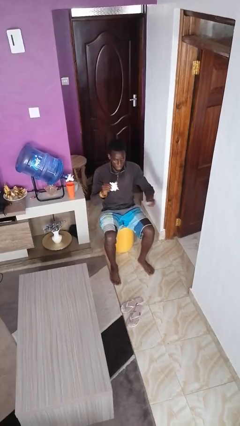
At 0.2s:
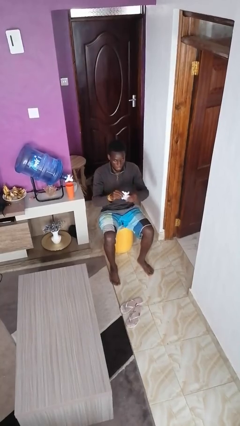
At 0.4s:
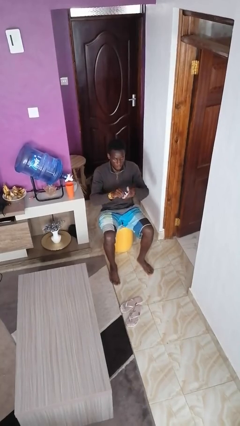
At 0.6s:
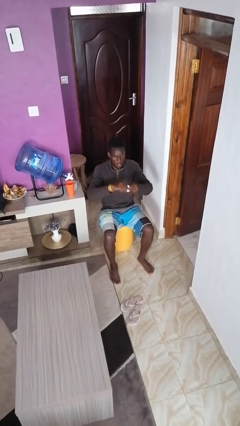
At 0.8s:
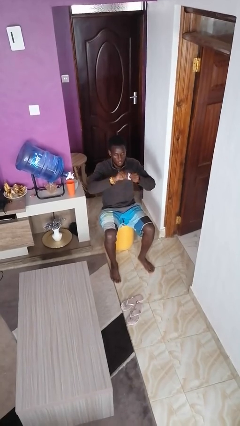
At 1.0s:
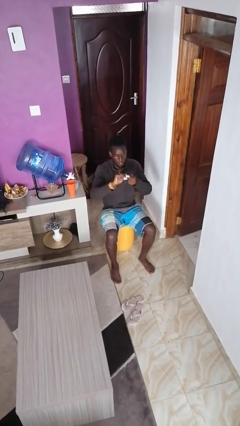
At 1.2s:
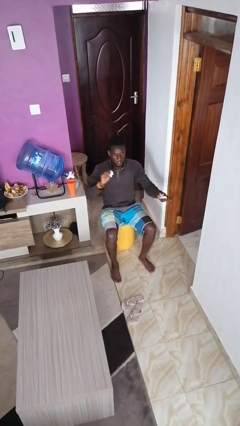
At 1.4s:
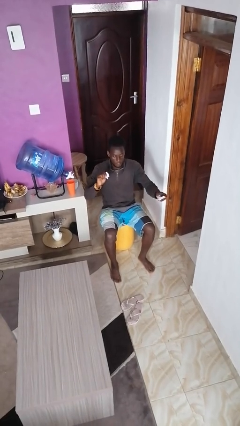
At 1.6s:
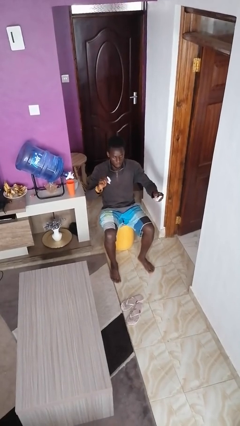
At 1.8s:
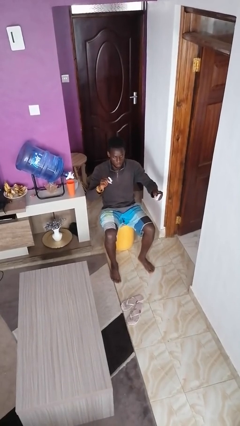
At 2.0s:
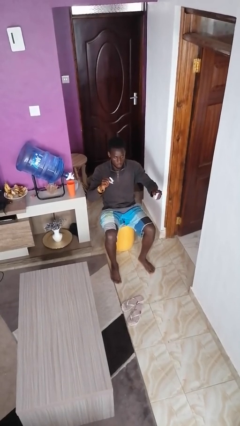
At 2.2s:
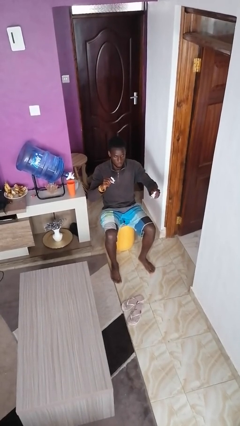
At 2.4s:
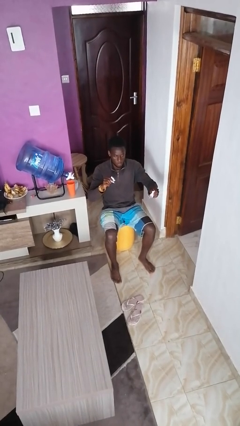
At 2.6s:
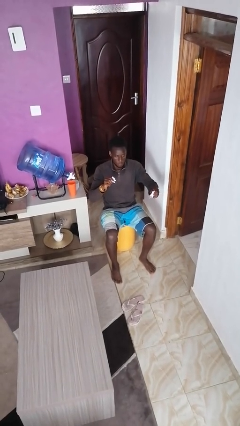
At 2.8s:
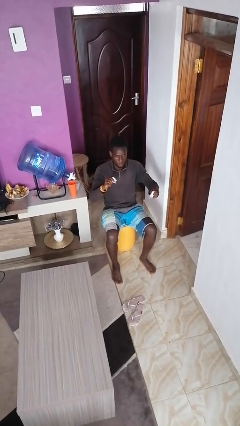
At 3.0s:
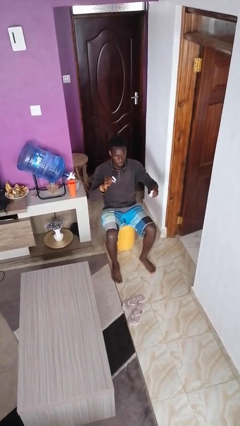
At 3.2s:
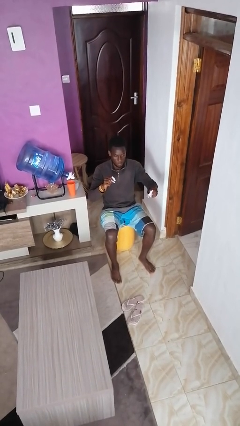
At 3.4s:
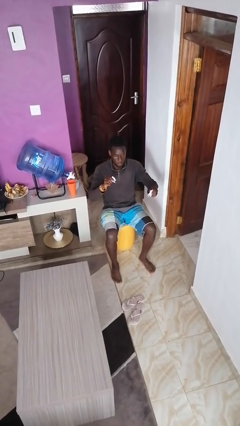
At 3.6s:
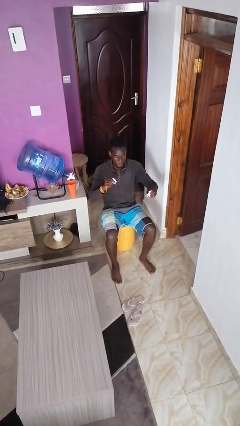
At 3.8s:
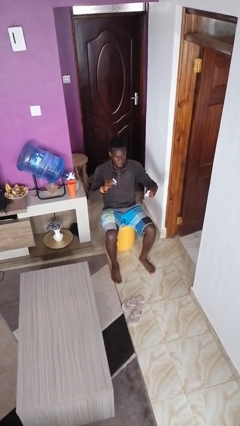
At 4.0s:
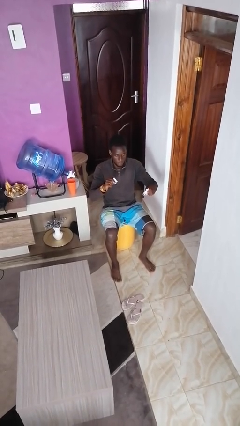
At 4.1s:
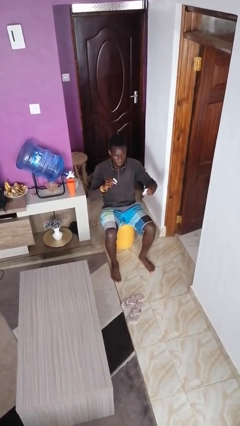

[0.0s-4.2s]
person tears paper

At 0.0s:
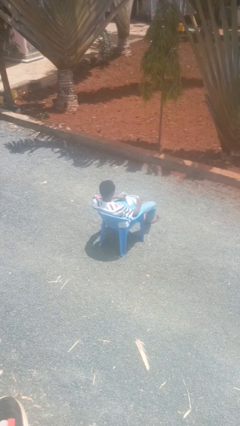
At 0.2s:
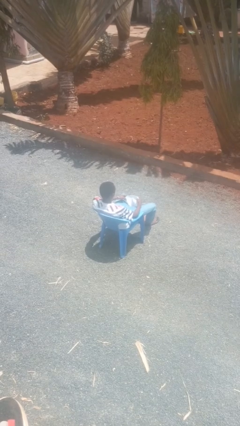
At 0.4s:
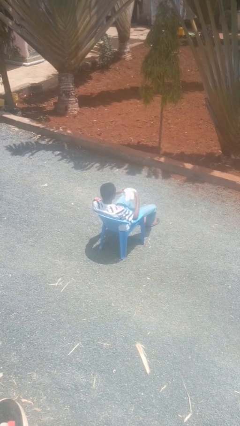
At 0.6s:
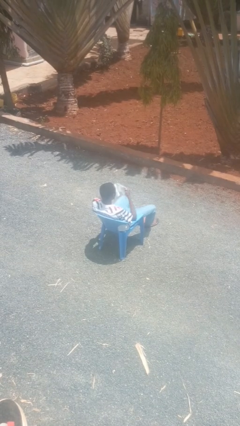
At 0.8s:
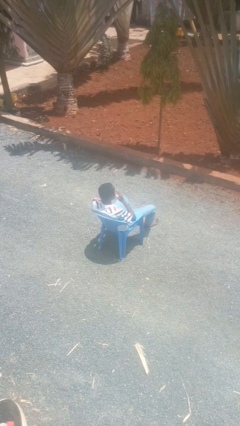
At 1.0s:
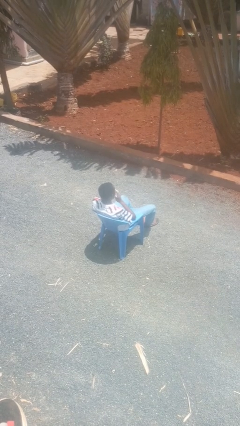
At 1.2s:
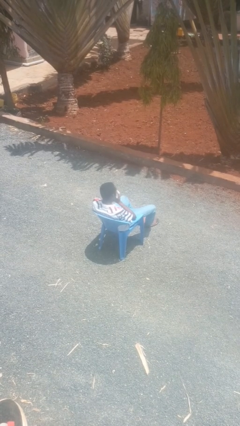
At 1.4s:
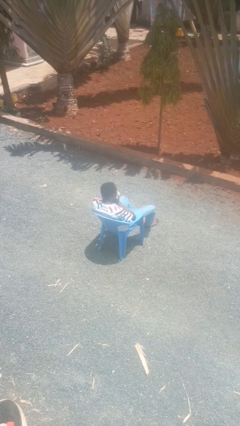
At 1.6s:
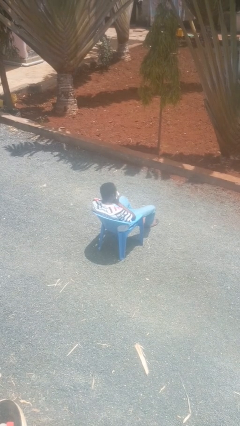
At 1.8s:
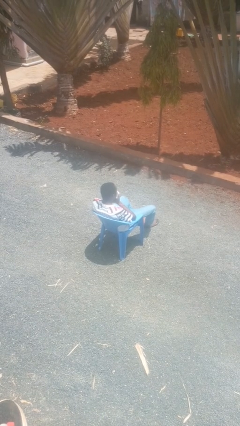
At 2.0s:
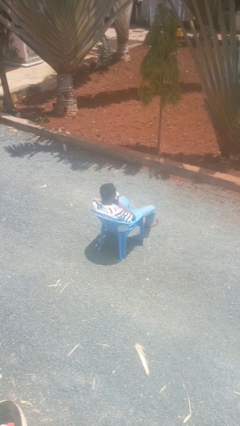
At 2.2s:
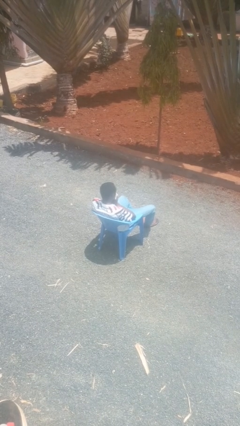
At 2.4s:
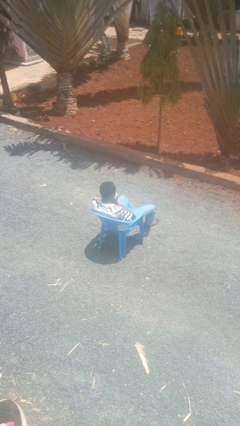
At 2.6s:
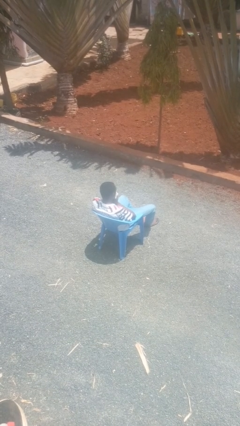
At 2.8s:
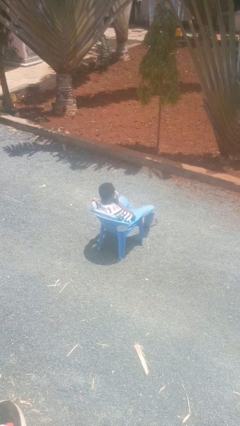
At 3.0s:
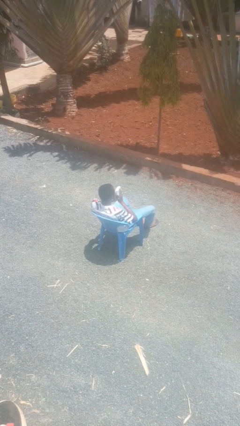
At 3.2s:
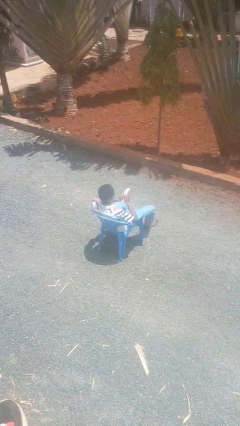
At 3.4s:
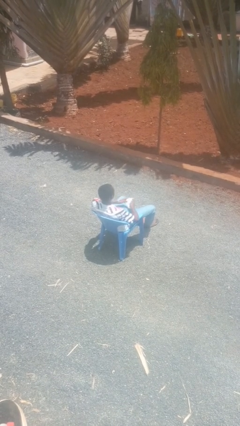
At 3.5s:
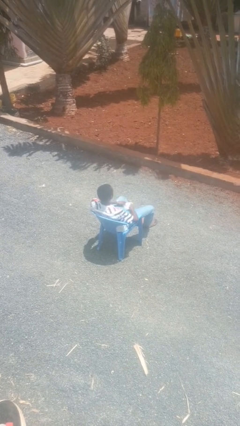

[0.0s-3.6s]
person blows nose

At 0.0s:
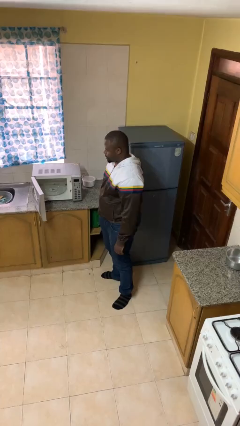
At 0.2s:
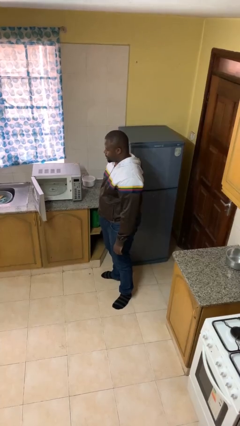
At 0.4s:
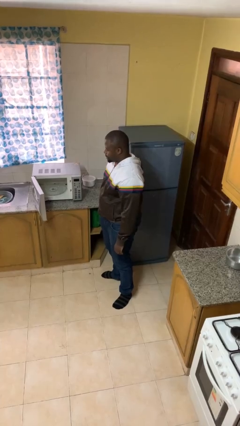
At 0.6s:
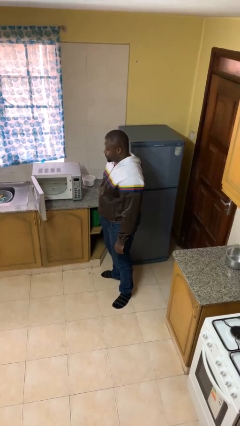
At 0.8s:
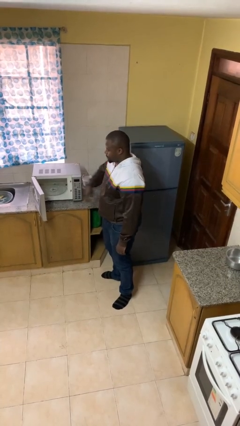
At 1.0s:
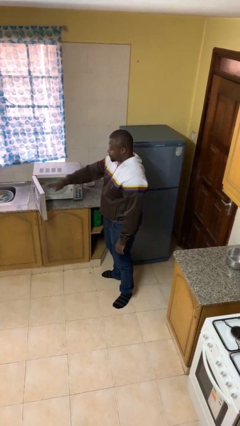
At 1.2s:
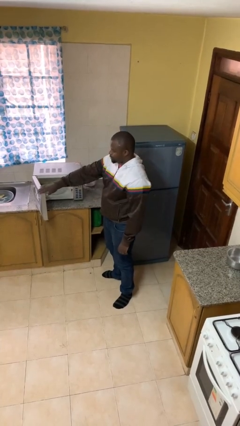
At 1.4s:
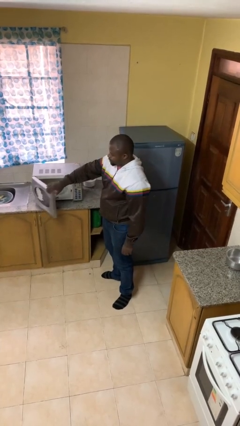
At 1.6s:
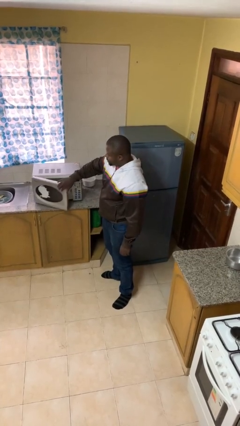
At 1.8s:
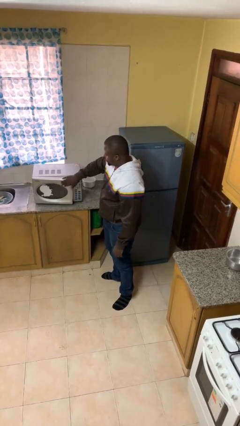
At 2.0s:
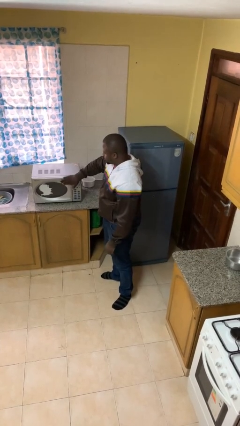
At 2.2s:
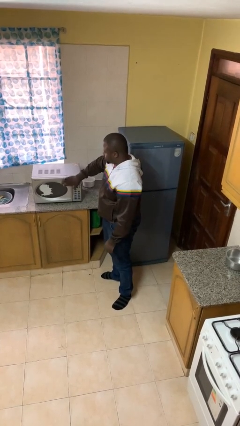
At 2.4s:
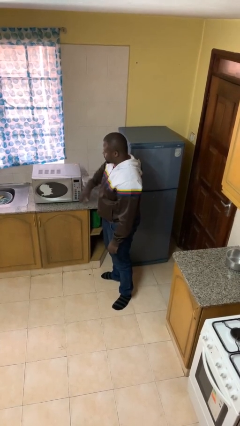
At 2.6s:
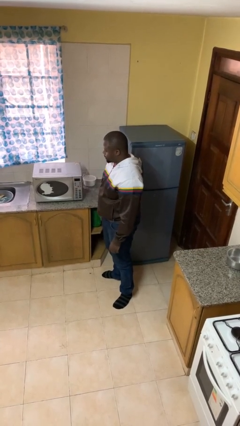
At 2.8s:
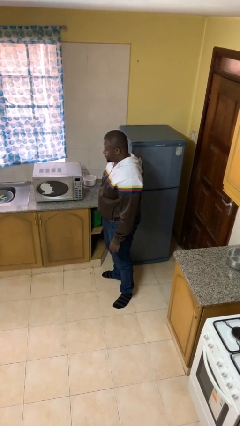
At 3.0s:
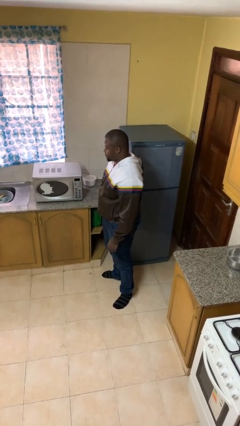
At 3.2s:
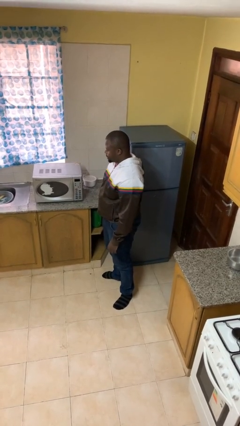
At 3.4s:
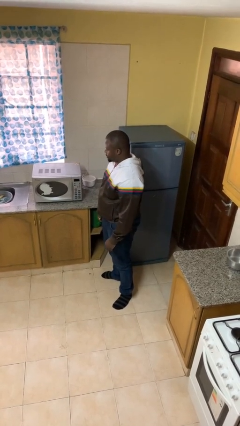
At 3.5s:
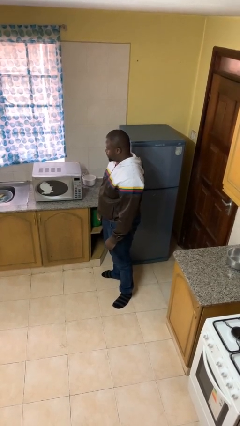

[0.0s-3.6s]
person closes microwave

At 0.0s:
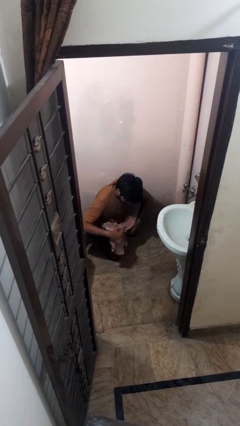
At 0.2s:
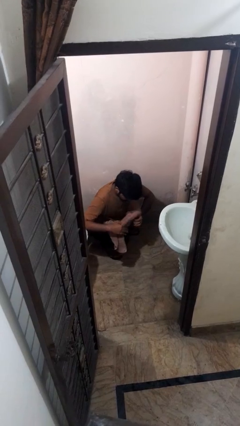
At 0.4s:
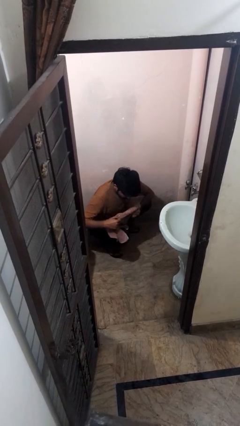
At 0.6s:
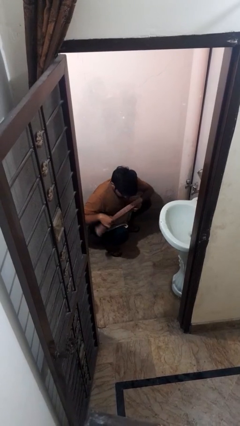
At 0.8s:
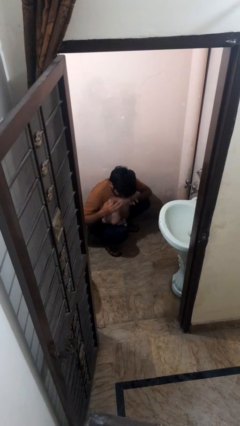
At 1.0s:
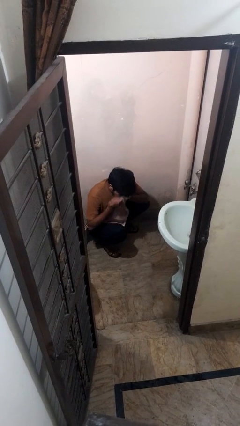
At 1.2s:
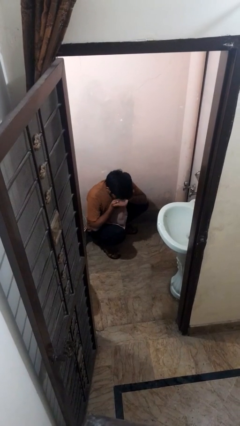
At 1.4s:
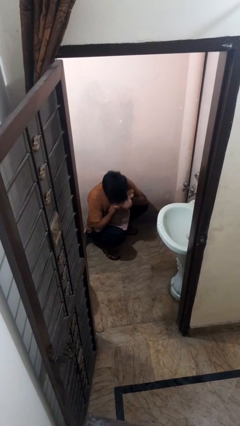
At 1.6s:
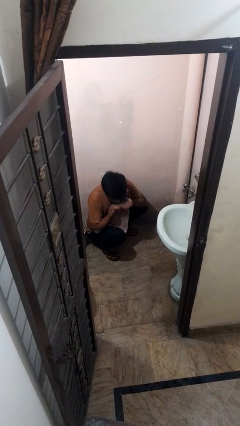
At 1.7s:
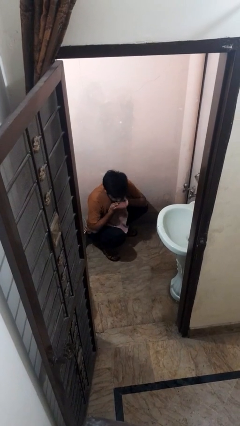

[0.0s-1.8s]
person throws object on bed

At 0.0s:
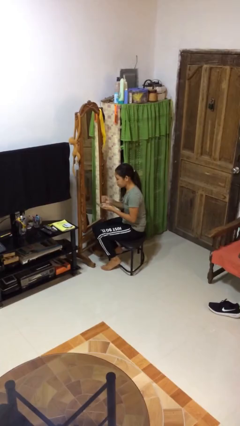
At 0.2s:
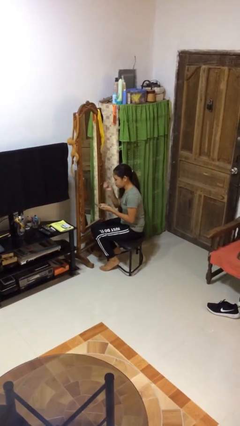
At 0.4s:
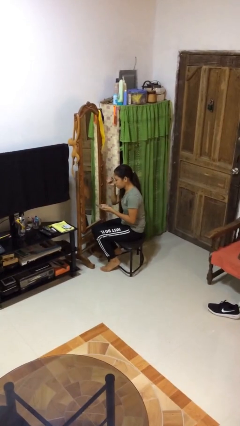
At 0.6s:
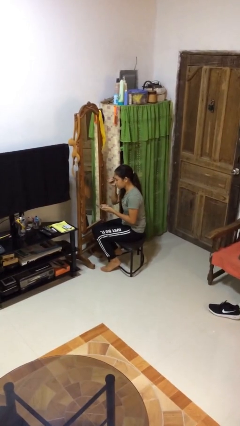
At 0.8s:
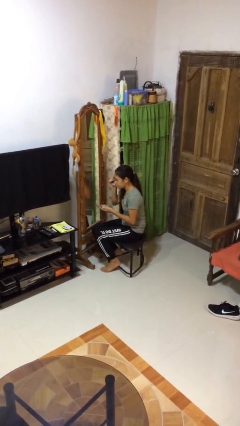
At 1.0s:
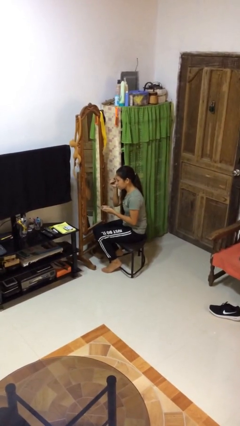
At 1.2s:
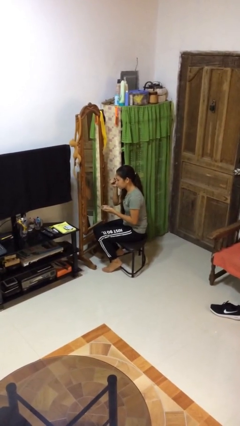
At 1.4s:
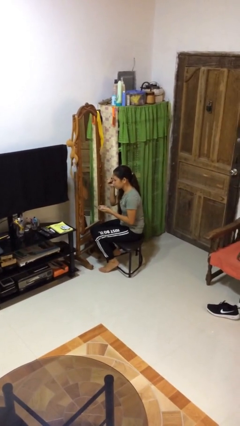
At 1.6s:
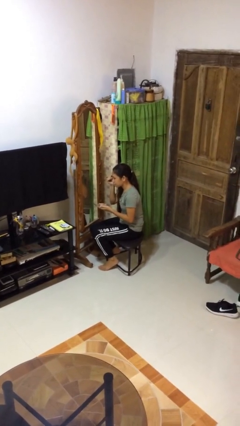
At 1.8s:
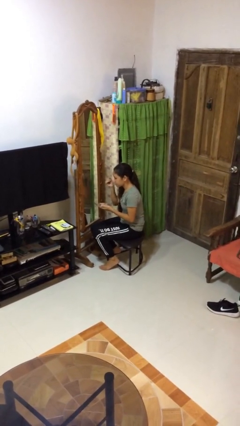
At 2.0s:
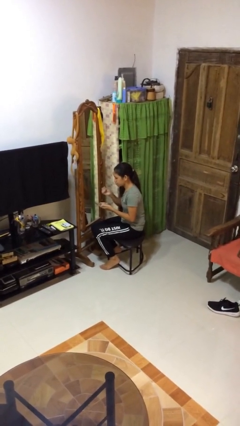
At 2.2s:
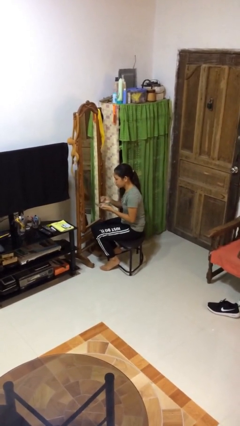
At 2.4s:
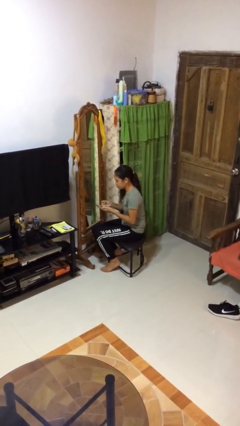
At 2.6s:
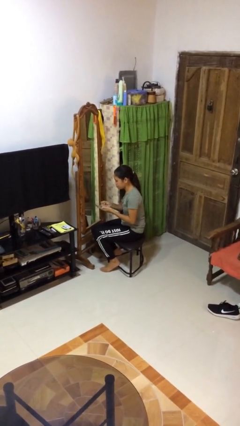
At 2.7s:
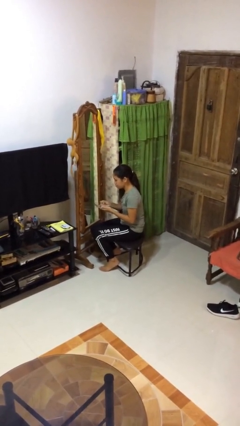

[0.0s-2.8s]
person applies eye makeup

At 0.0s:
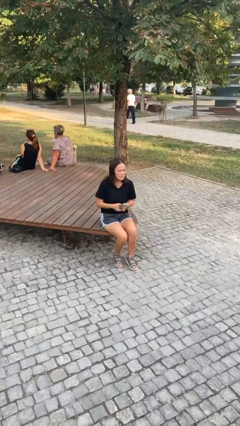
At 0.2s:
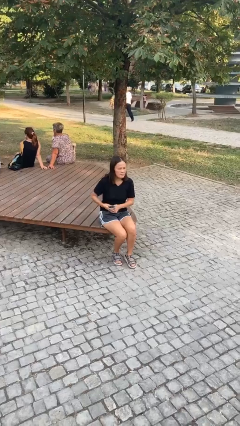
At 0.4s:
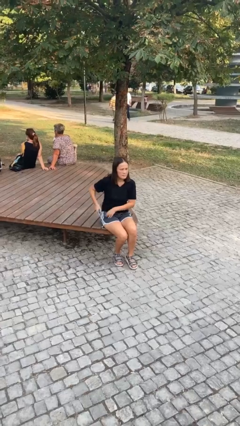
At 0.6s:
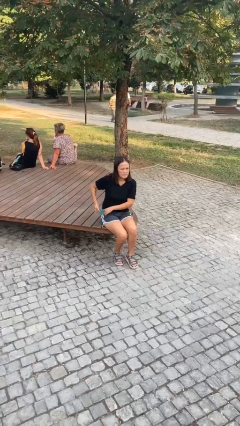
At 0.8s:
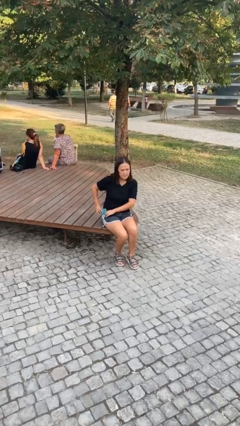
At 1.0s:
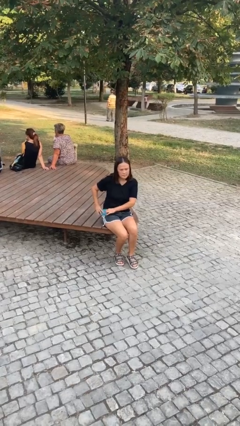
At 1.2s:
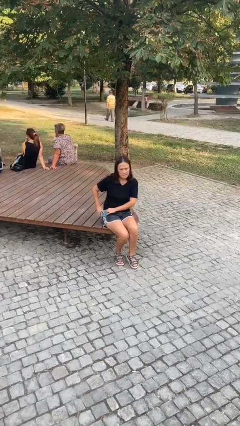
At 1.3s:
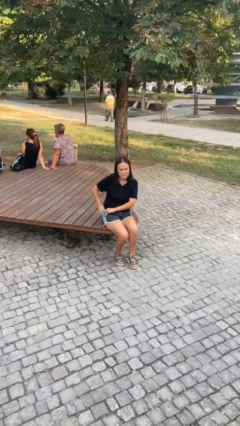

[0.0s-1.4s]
person puts phone into pocket

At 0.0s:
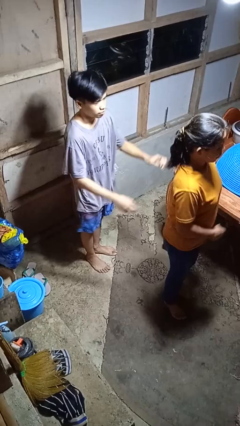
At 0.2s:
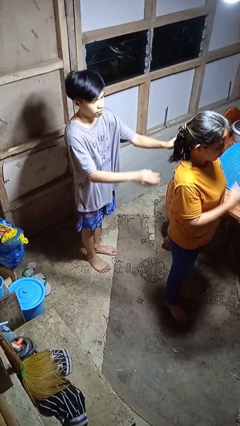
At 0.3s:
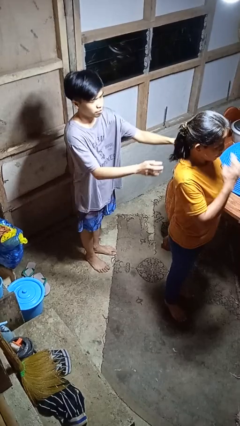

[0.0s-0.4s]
person grabs person by shoulder
